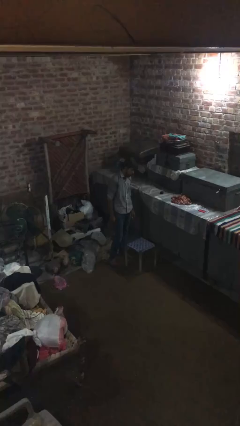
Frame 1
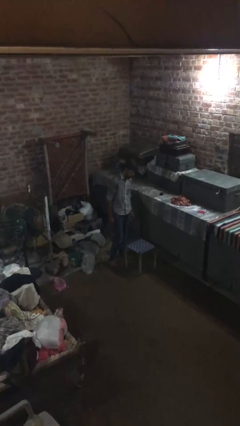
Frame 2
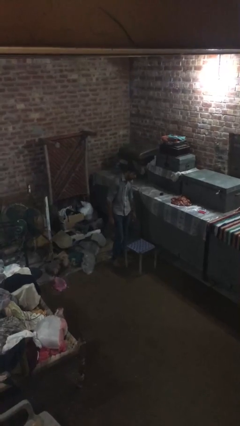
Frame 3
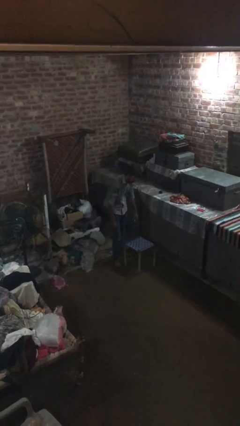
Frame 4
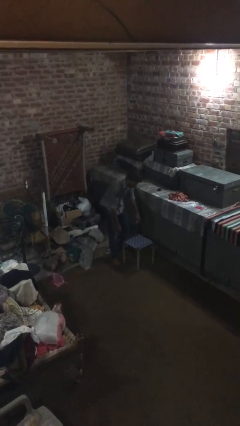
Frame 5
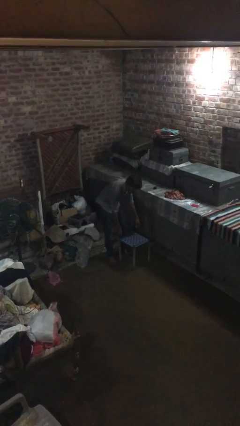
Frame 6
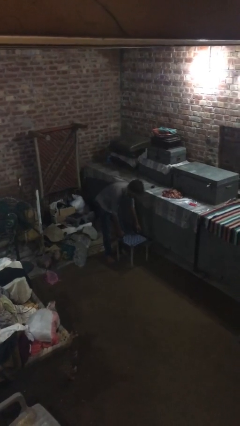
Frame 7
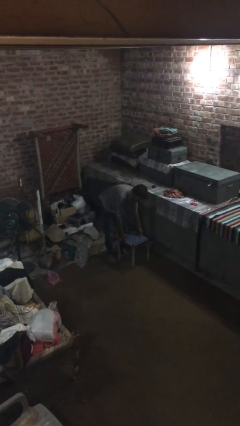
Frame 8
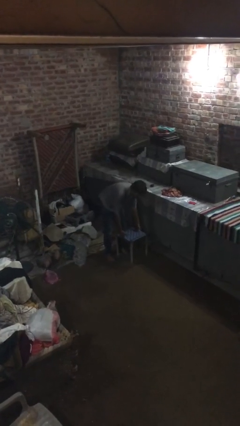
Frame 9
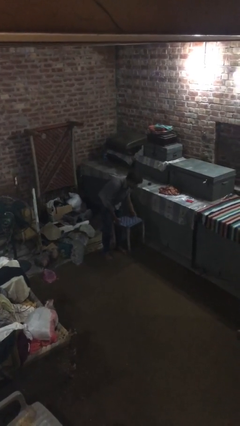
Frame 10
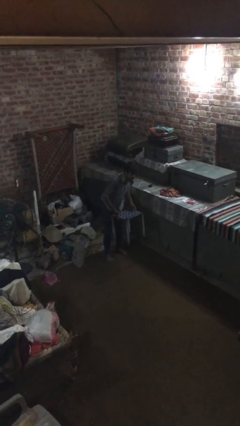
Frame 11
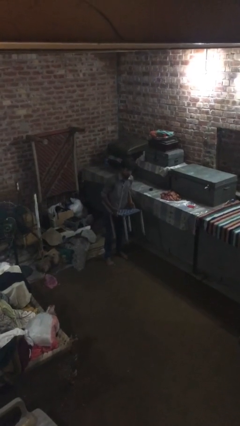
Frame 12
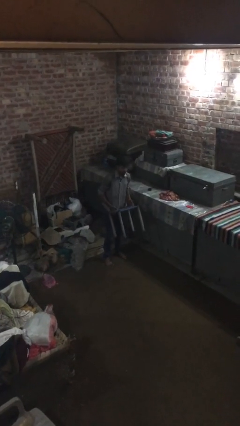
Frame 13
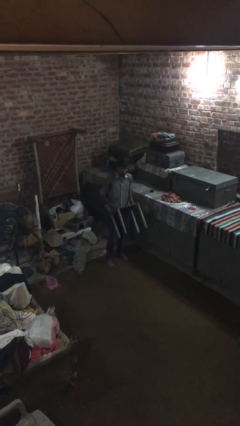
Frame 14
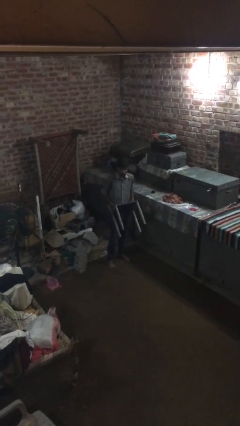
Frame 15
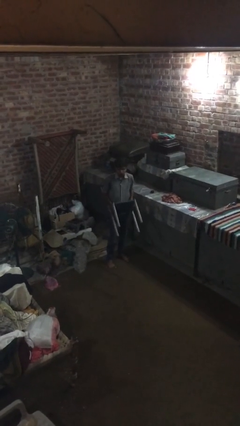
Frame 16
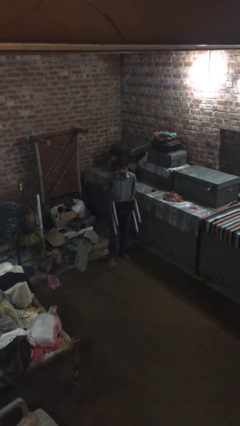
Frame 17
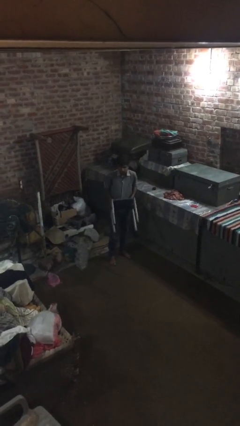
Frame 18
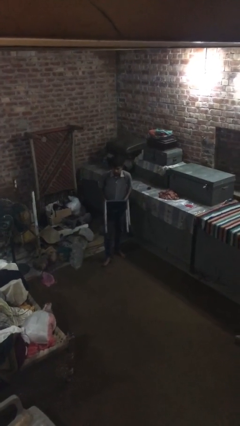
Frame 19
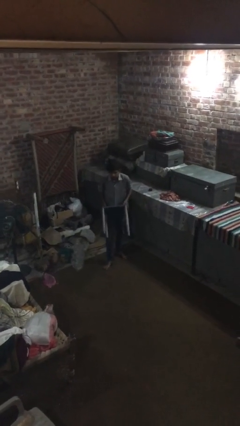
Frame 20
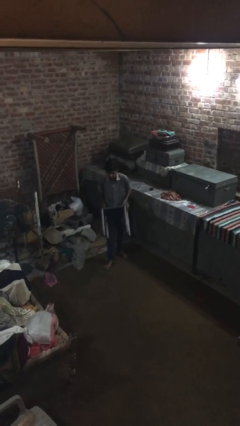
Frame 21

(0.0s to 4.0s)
person picks up object from floor

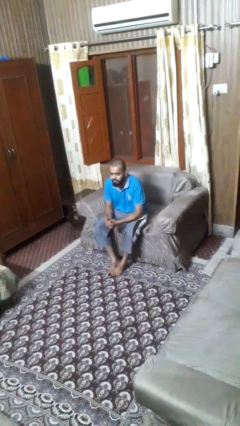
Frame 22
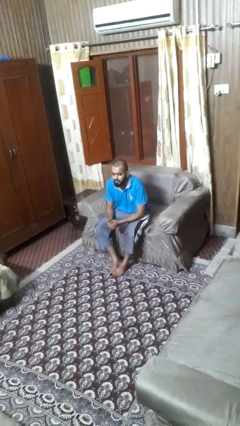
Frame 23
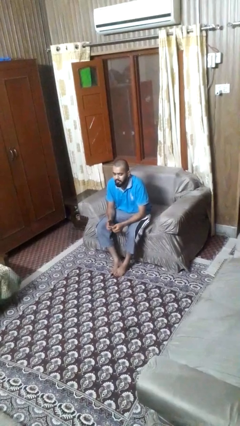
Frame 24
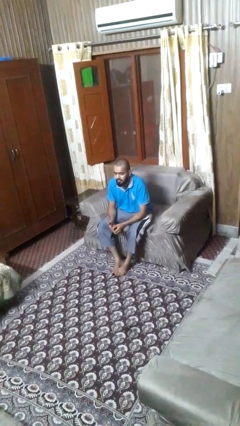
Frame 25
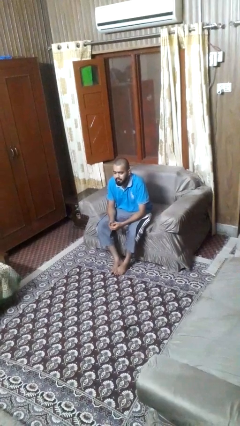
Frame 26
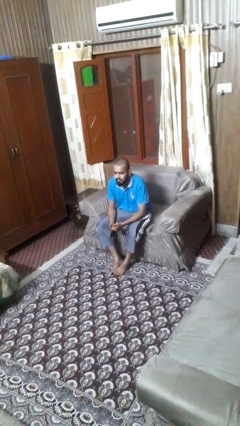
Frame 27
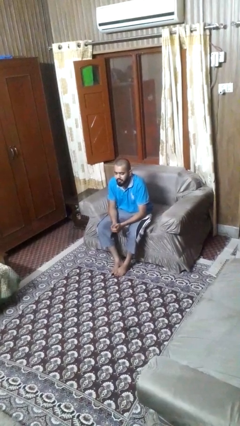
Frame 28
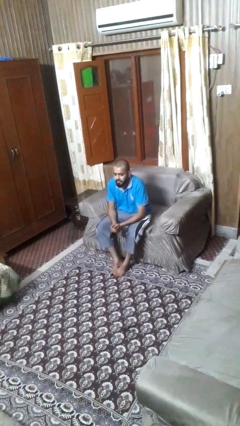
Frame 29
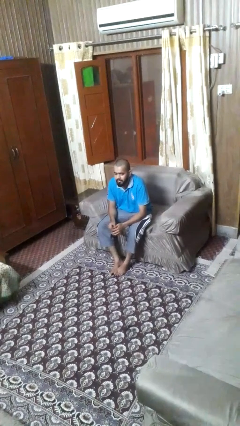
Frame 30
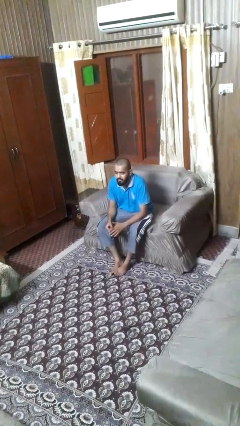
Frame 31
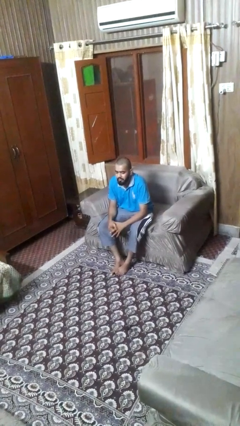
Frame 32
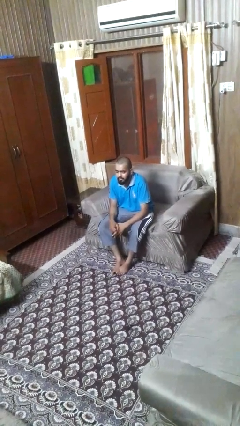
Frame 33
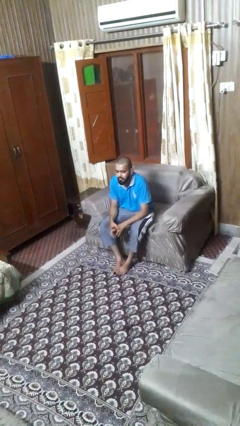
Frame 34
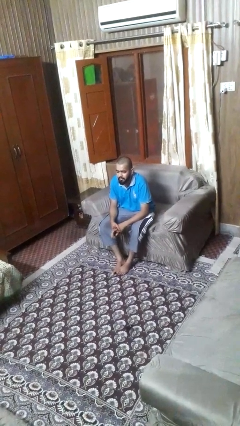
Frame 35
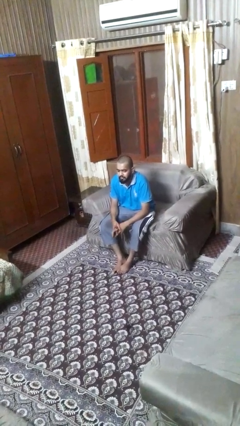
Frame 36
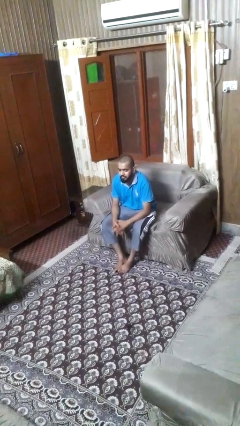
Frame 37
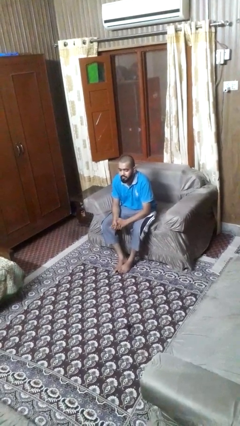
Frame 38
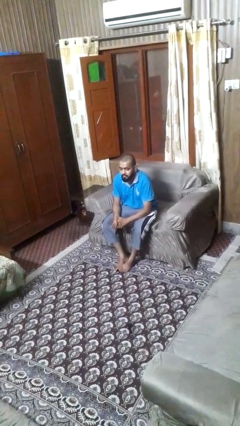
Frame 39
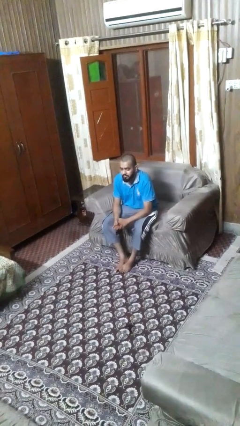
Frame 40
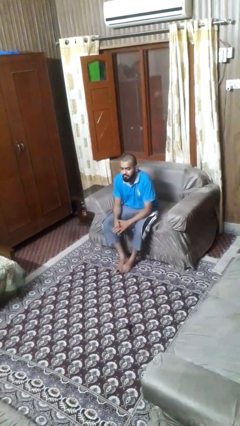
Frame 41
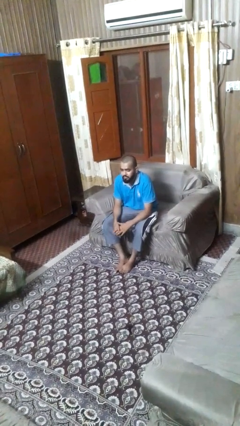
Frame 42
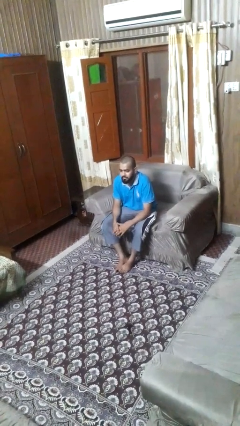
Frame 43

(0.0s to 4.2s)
person cracks knuckles

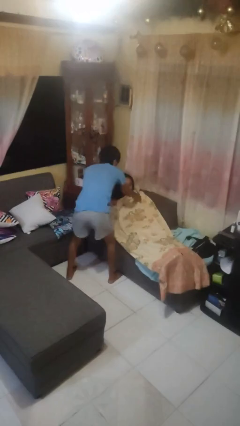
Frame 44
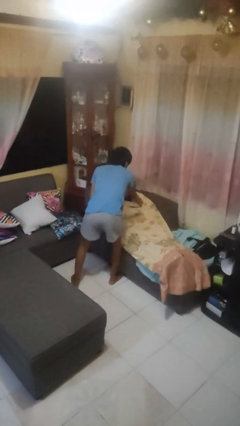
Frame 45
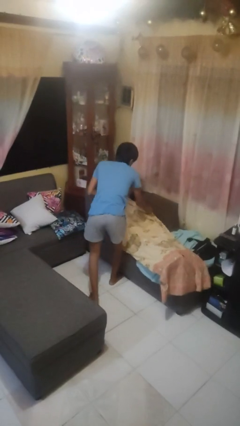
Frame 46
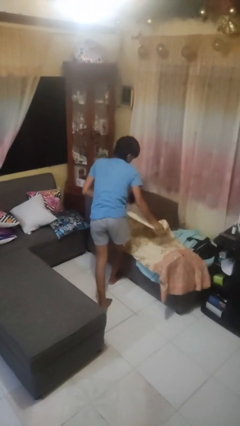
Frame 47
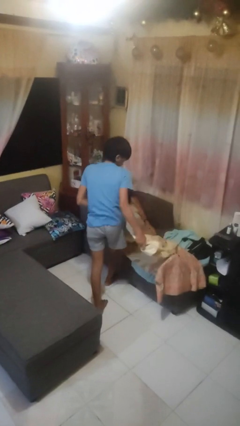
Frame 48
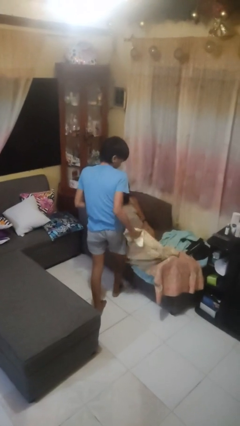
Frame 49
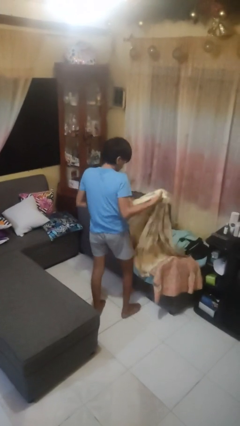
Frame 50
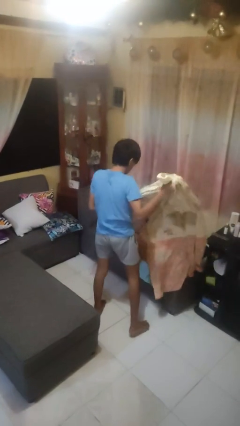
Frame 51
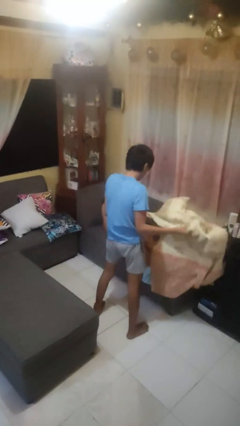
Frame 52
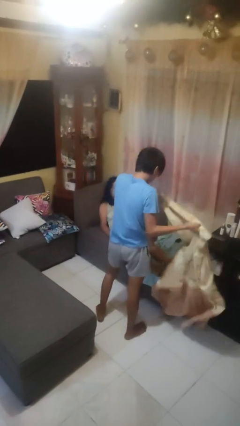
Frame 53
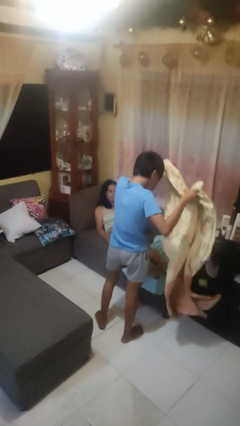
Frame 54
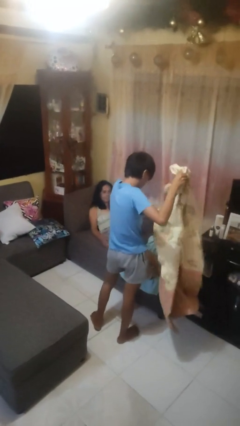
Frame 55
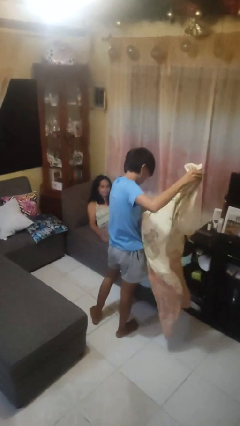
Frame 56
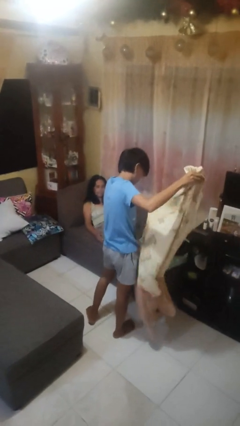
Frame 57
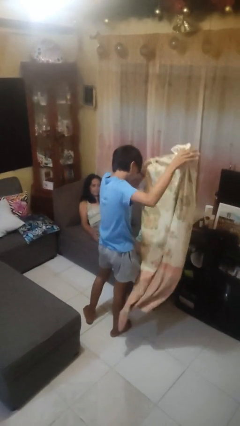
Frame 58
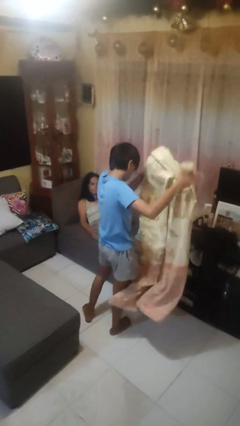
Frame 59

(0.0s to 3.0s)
person uncovers friend with blanket

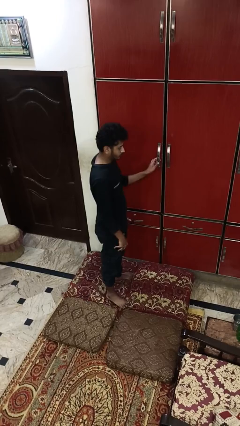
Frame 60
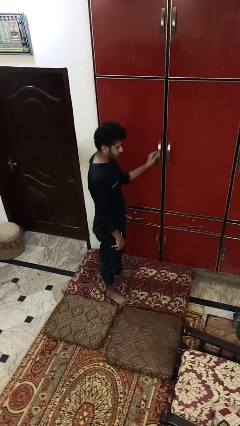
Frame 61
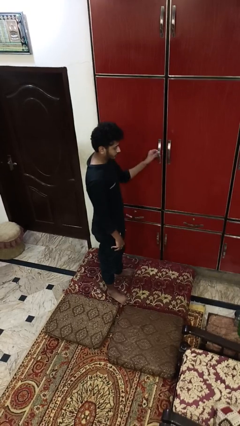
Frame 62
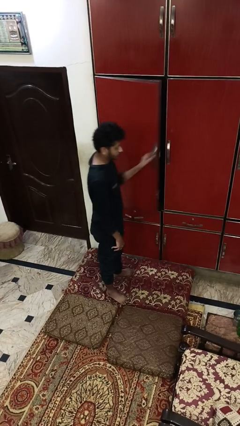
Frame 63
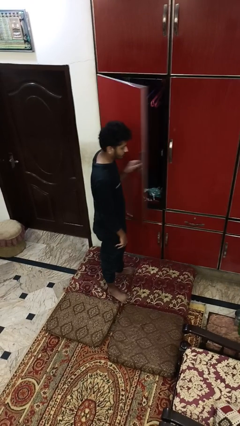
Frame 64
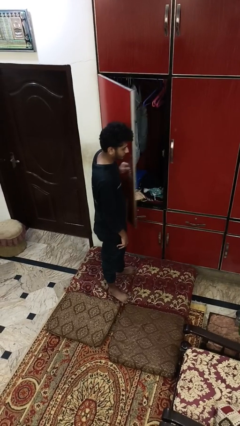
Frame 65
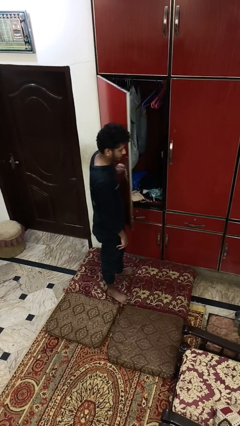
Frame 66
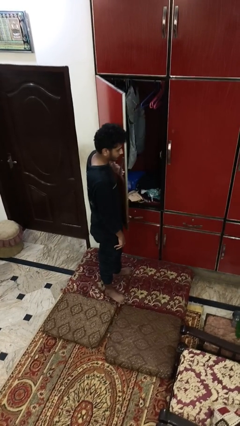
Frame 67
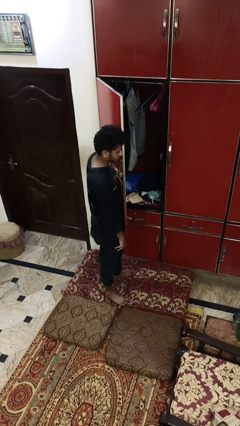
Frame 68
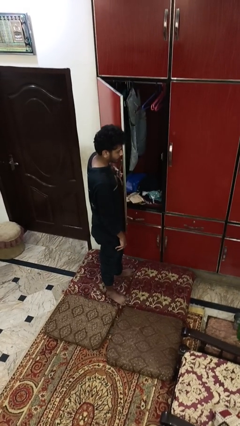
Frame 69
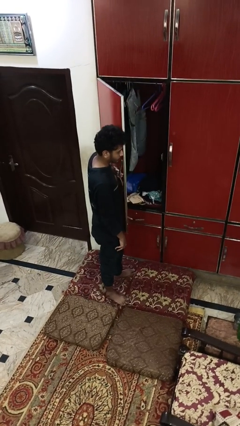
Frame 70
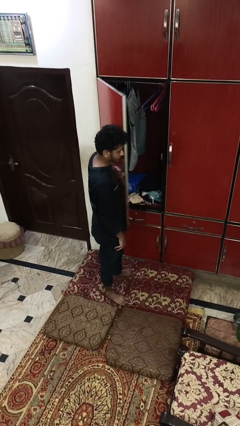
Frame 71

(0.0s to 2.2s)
person opens closet door

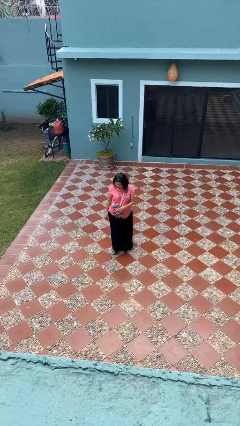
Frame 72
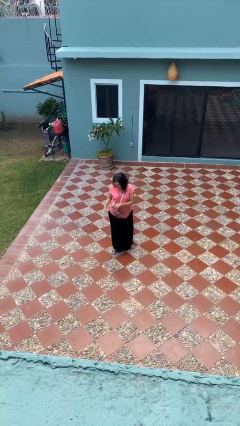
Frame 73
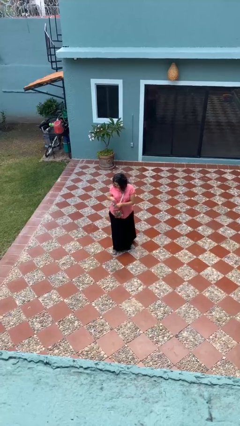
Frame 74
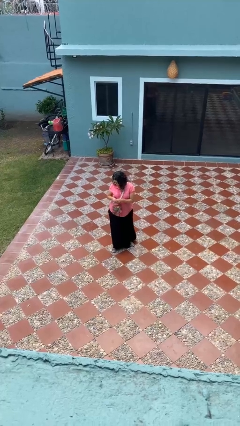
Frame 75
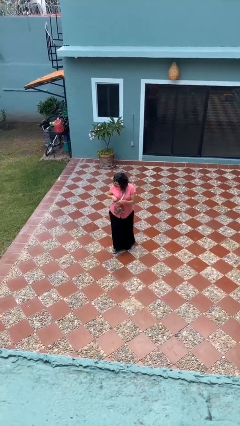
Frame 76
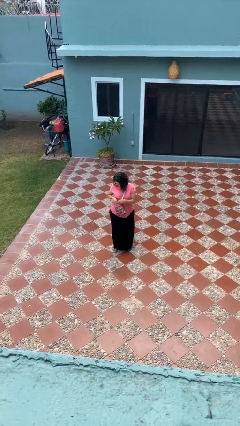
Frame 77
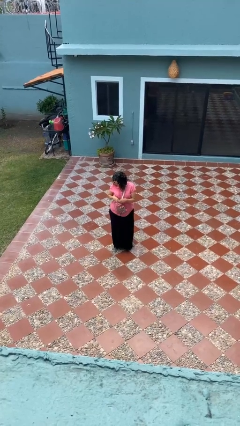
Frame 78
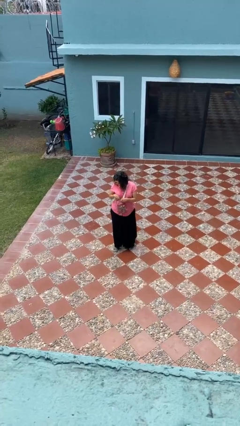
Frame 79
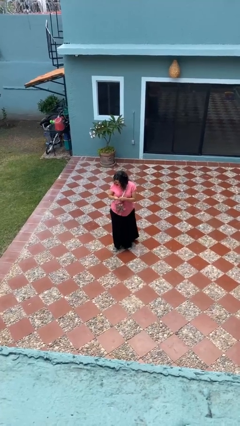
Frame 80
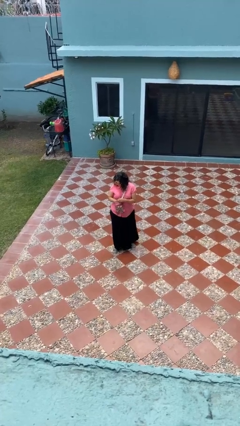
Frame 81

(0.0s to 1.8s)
person searches in purse

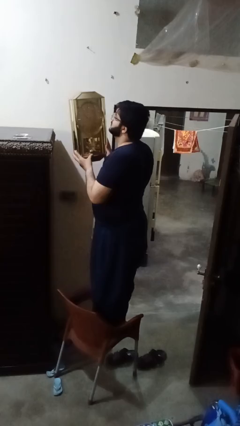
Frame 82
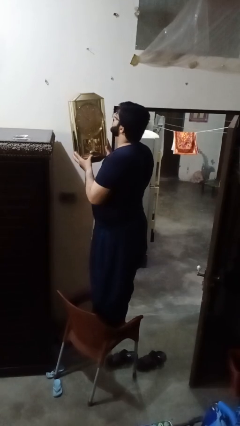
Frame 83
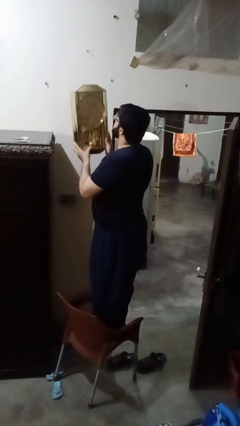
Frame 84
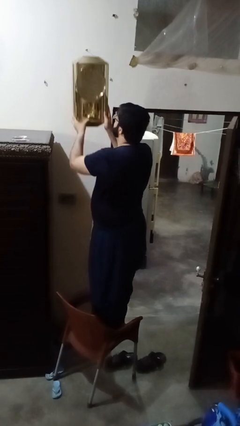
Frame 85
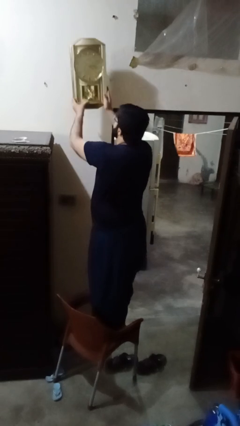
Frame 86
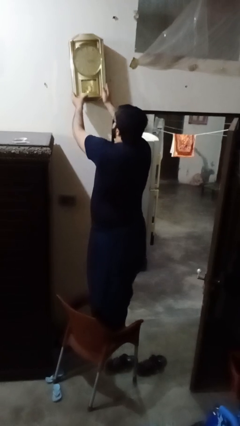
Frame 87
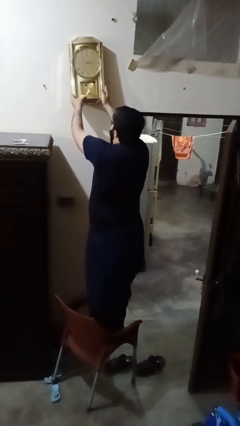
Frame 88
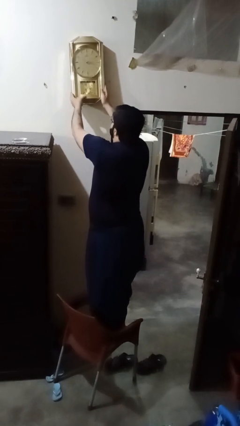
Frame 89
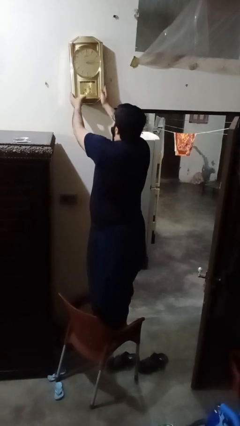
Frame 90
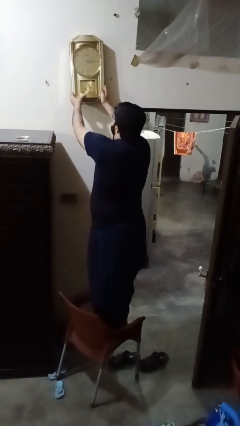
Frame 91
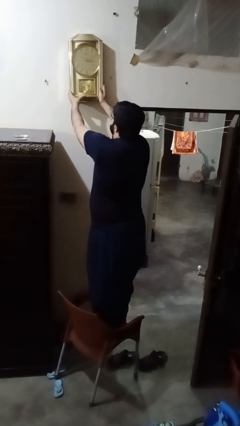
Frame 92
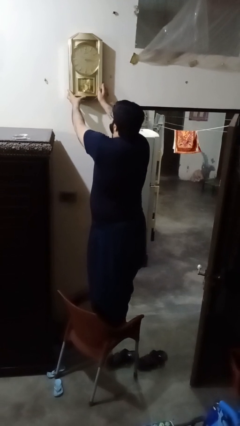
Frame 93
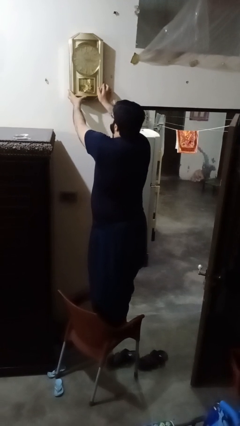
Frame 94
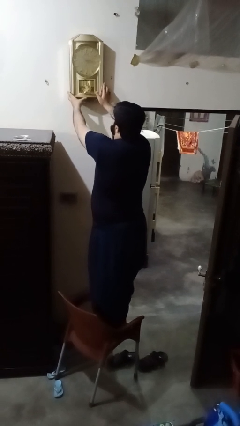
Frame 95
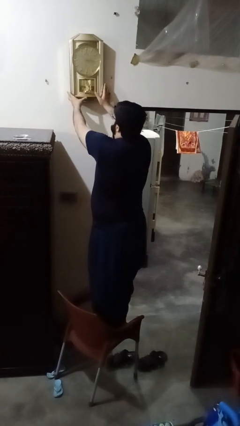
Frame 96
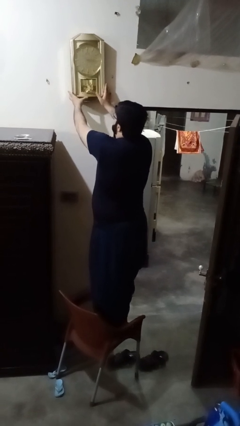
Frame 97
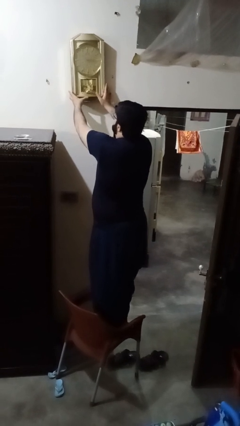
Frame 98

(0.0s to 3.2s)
person puts up smoke detector
